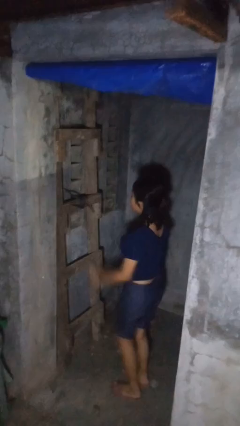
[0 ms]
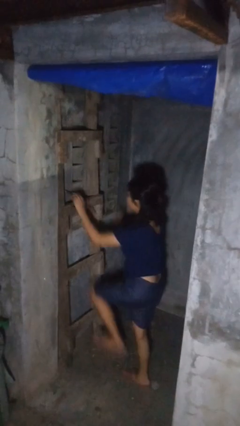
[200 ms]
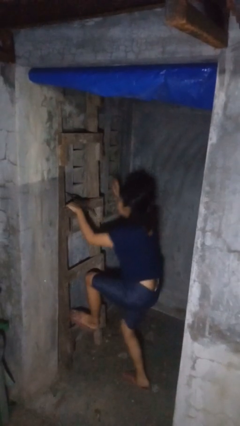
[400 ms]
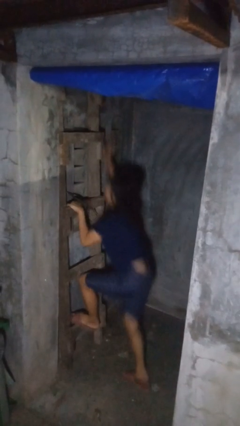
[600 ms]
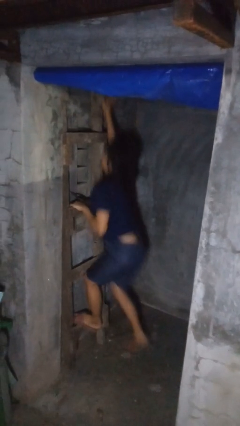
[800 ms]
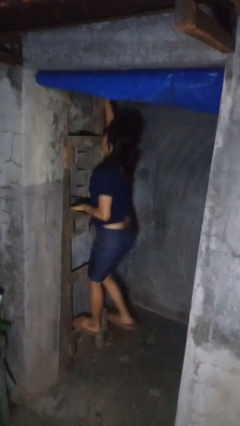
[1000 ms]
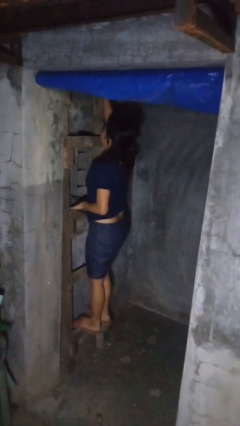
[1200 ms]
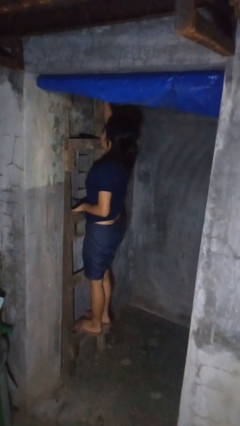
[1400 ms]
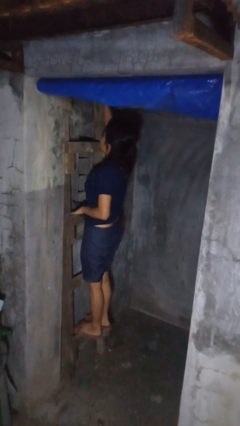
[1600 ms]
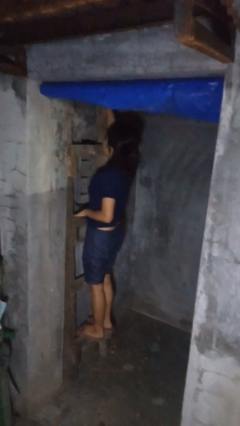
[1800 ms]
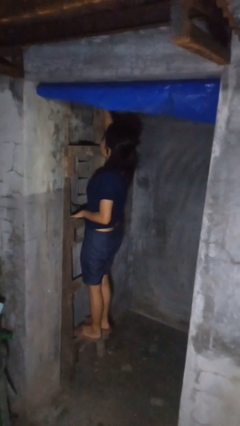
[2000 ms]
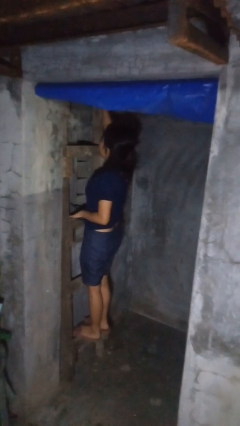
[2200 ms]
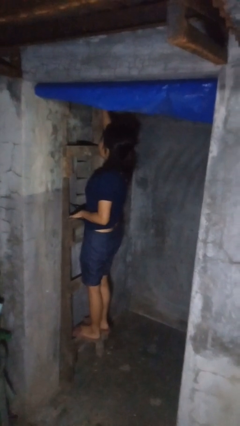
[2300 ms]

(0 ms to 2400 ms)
person climbs up ladder

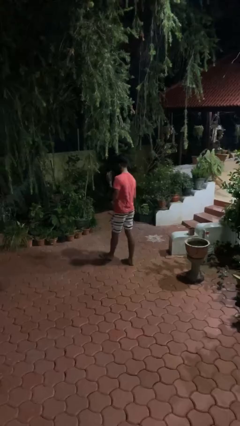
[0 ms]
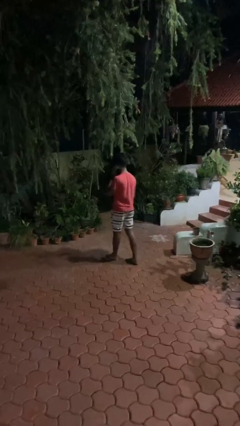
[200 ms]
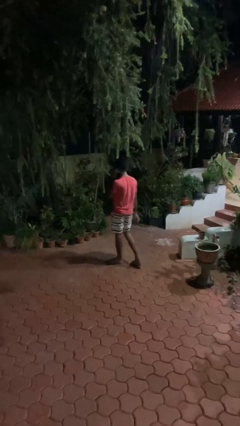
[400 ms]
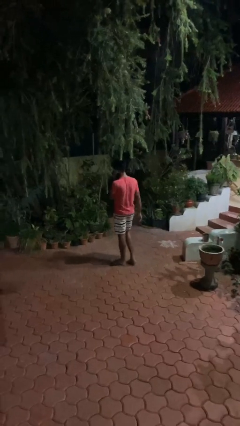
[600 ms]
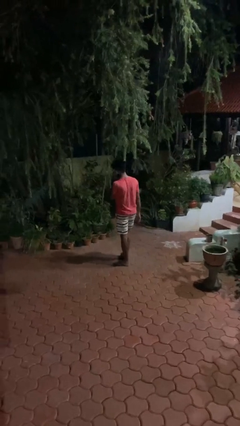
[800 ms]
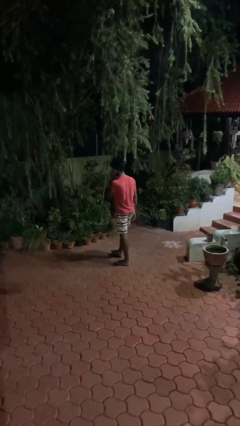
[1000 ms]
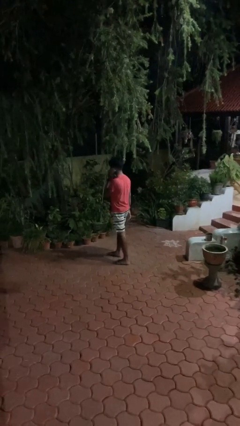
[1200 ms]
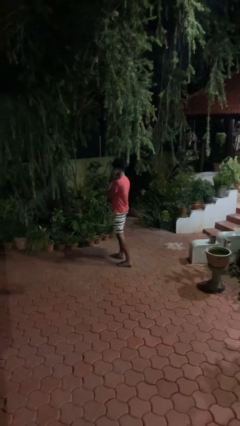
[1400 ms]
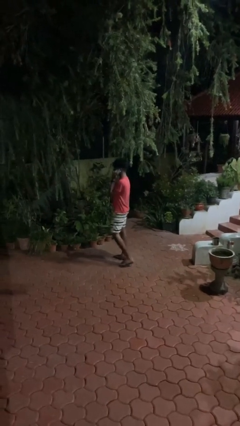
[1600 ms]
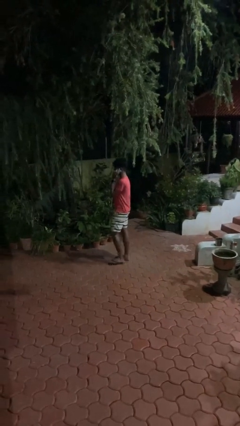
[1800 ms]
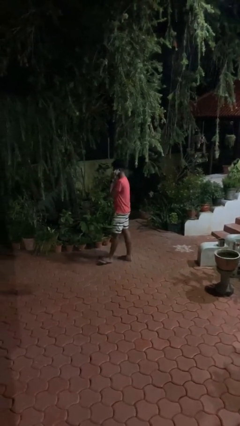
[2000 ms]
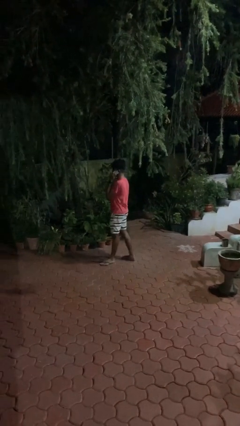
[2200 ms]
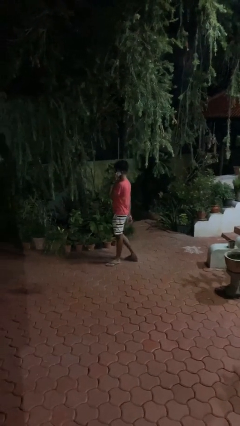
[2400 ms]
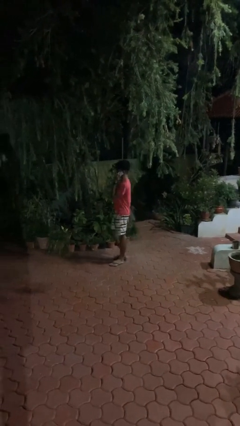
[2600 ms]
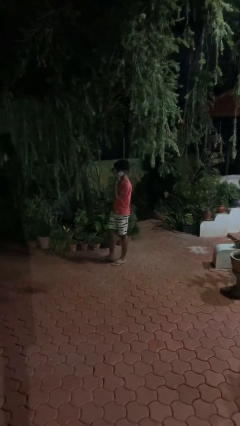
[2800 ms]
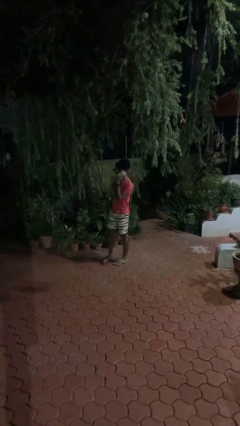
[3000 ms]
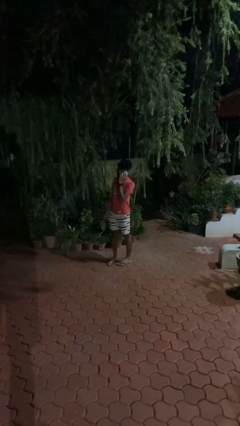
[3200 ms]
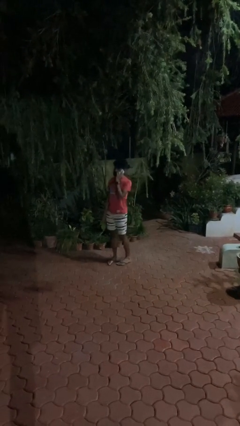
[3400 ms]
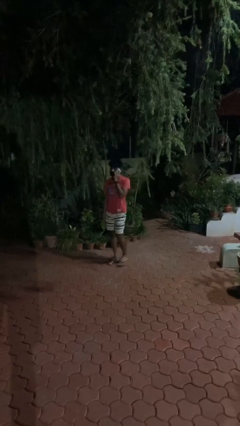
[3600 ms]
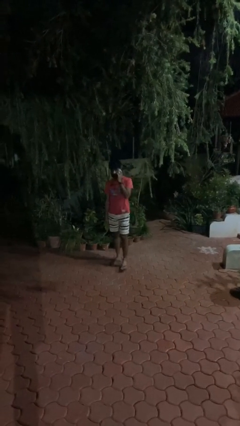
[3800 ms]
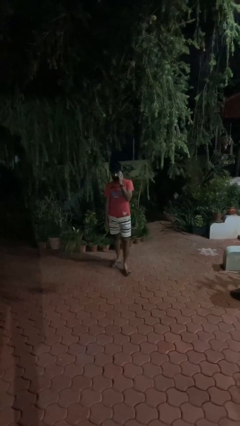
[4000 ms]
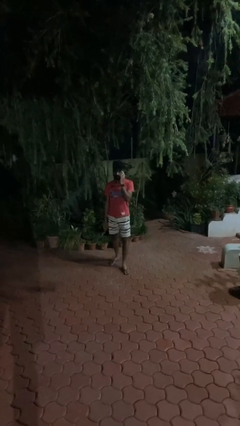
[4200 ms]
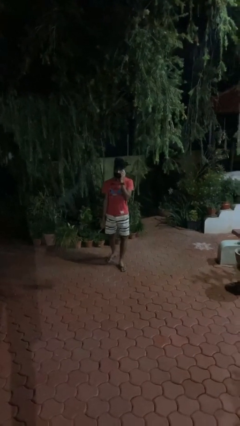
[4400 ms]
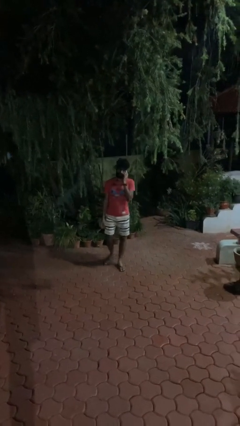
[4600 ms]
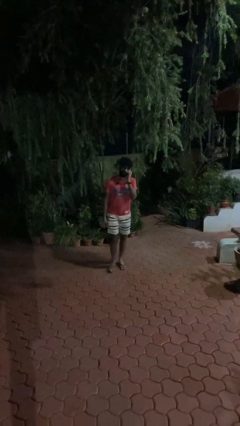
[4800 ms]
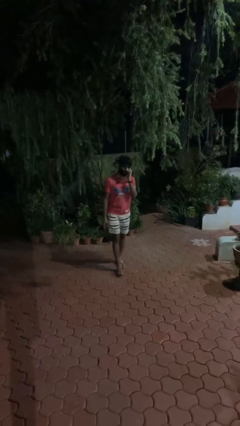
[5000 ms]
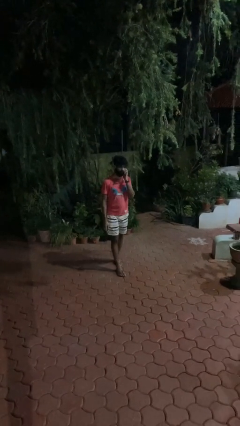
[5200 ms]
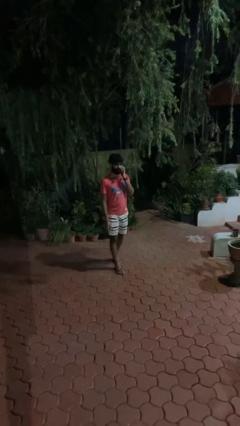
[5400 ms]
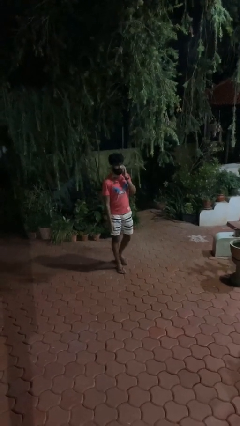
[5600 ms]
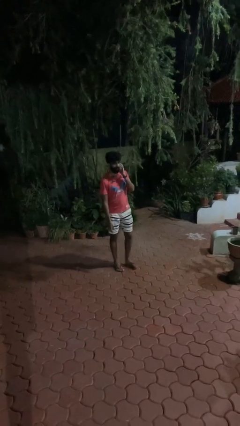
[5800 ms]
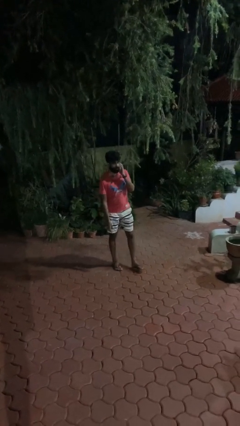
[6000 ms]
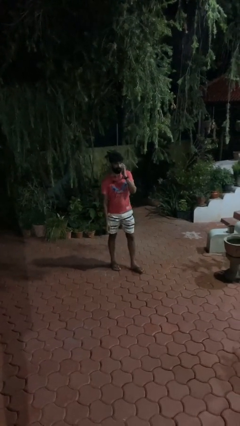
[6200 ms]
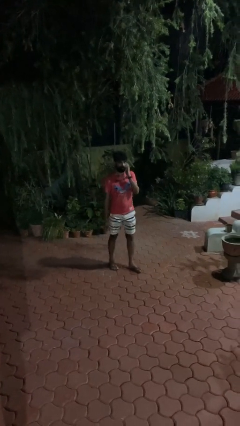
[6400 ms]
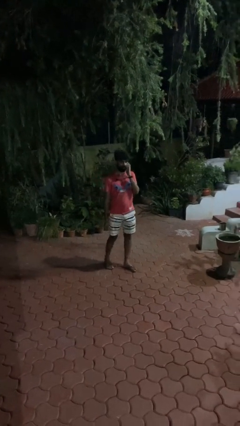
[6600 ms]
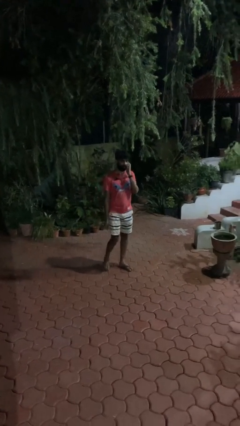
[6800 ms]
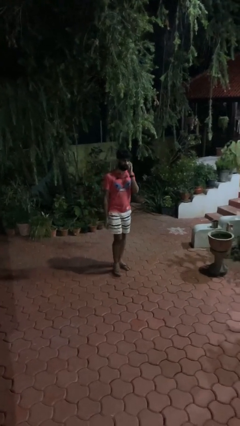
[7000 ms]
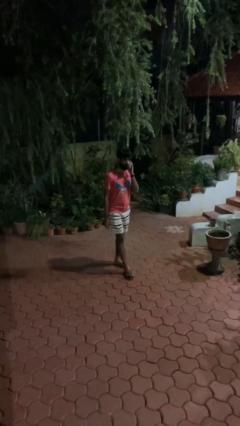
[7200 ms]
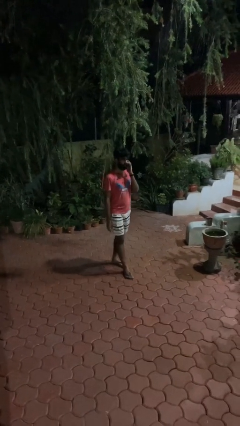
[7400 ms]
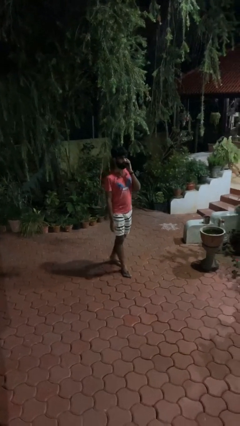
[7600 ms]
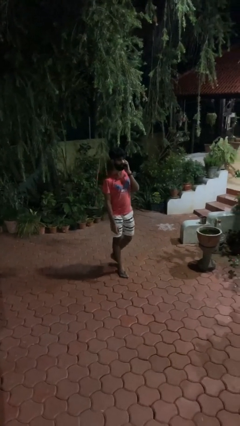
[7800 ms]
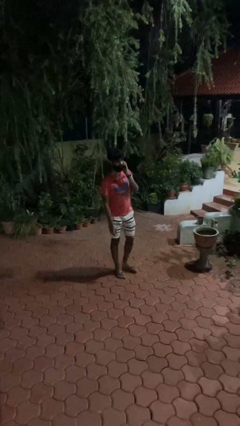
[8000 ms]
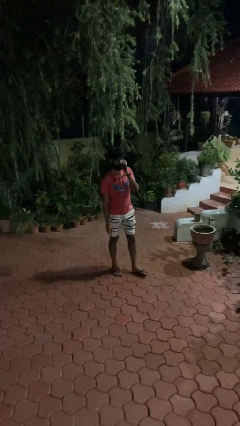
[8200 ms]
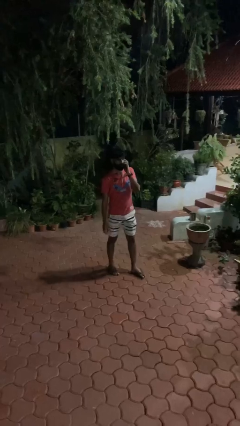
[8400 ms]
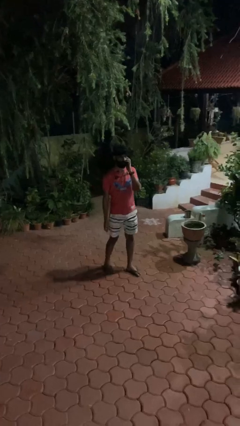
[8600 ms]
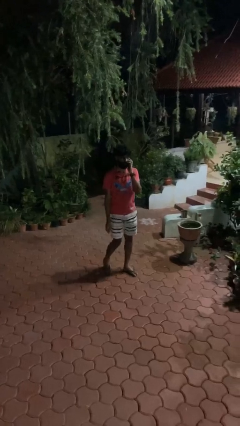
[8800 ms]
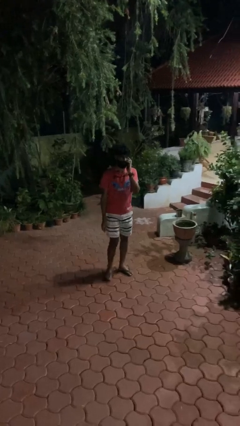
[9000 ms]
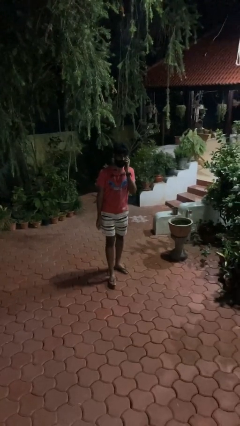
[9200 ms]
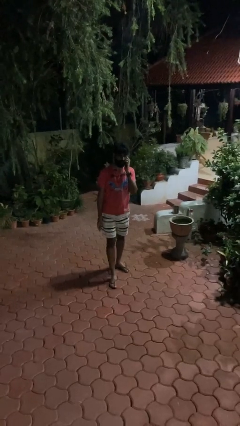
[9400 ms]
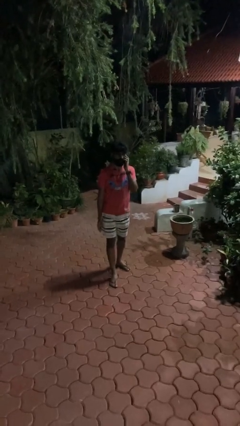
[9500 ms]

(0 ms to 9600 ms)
person talks on phone

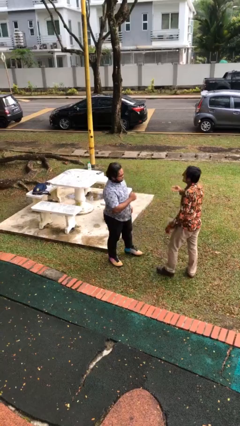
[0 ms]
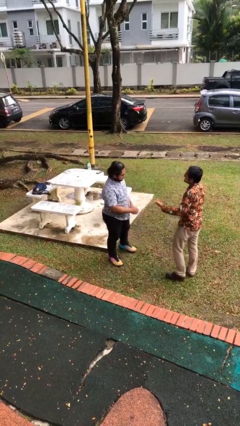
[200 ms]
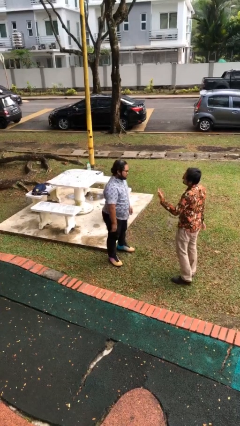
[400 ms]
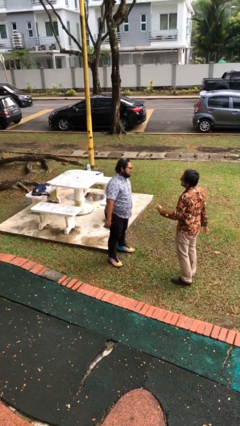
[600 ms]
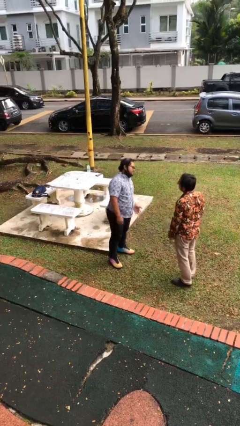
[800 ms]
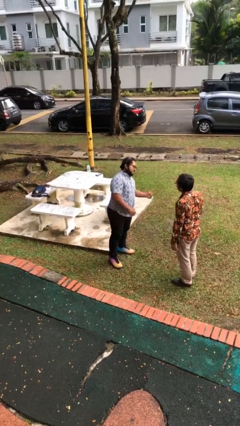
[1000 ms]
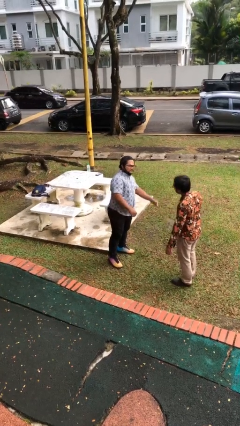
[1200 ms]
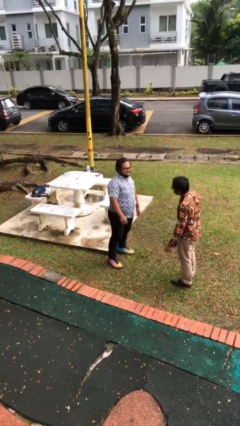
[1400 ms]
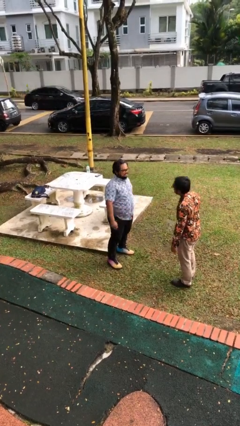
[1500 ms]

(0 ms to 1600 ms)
person talks to person

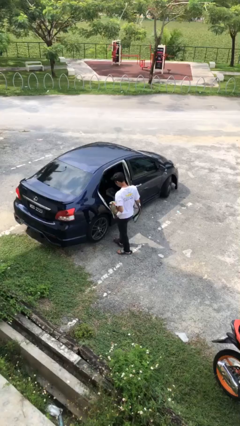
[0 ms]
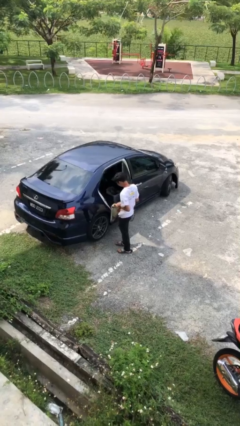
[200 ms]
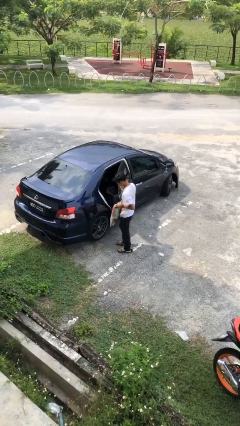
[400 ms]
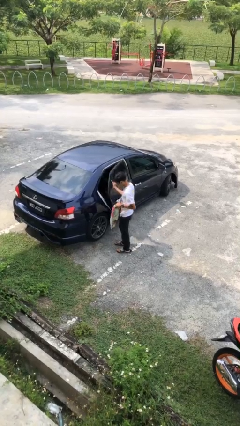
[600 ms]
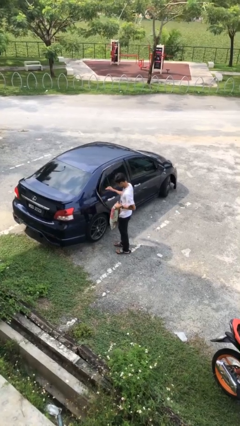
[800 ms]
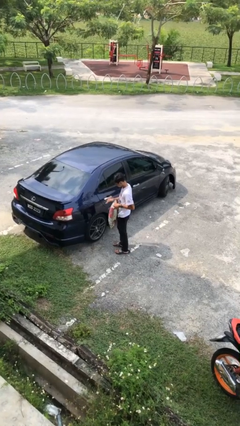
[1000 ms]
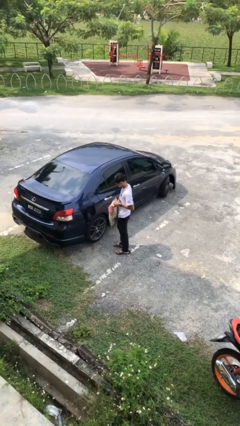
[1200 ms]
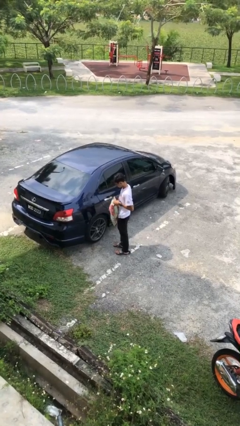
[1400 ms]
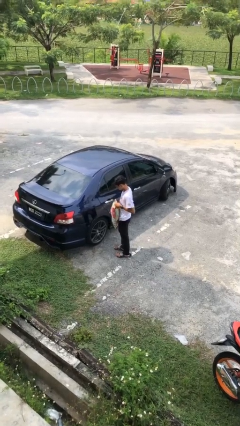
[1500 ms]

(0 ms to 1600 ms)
person closes car door

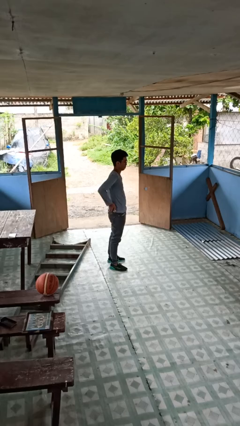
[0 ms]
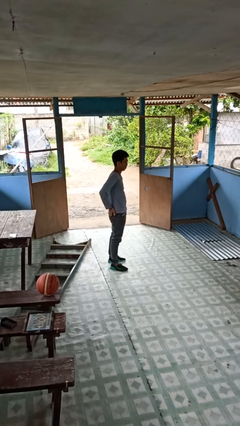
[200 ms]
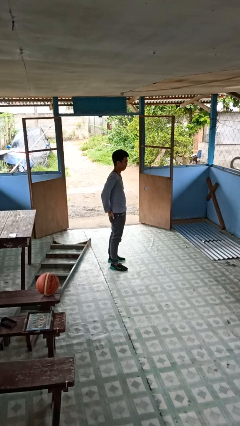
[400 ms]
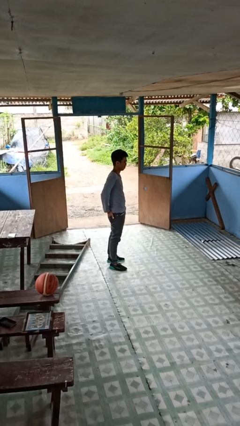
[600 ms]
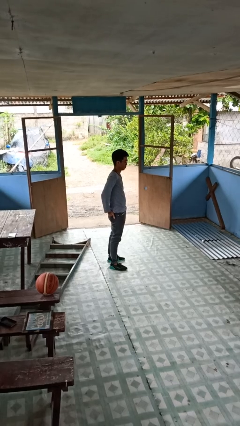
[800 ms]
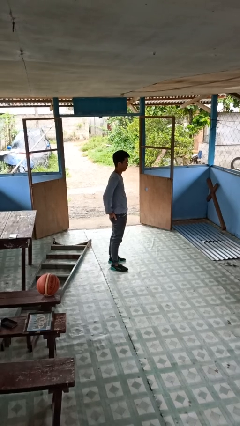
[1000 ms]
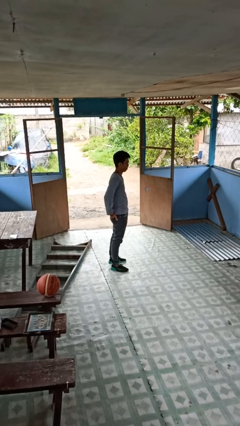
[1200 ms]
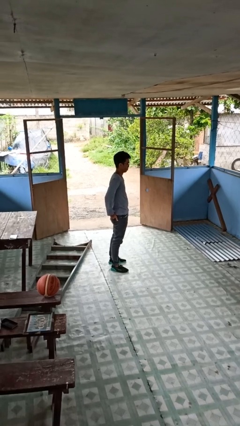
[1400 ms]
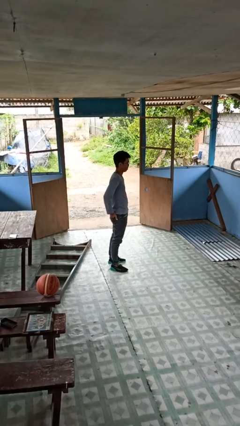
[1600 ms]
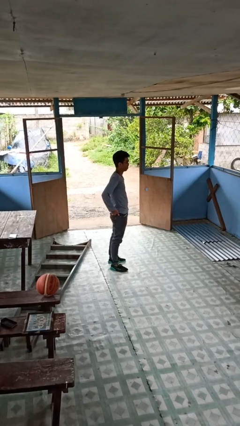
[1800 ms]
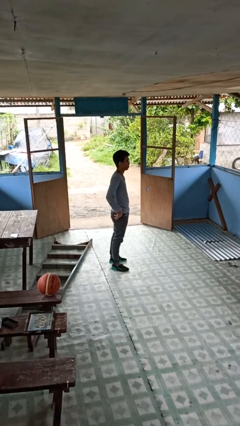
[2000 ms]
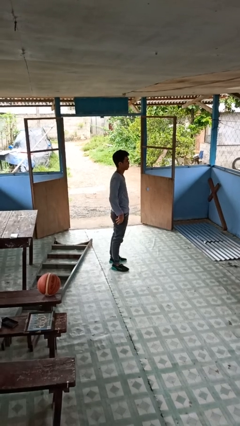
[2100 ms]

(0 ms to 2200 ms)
person puts hands in back pockets

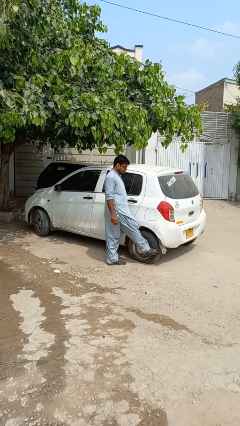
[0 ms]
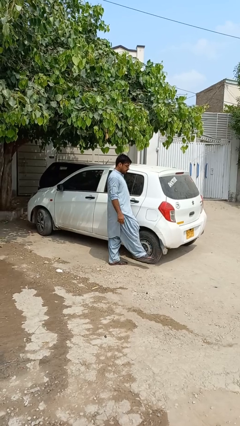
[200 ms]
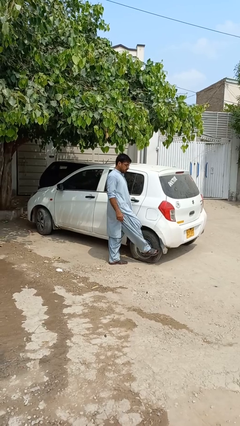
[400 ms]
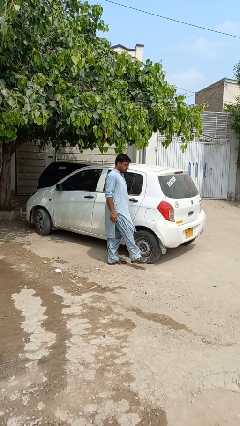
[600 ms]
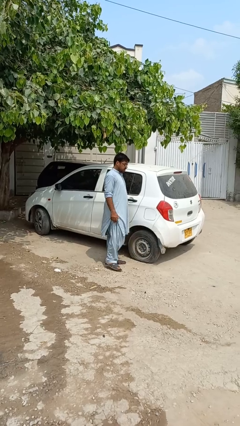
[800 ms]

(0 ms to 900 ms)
person kicks car tires
